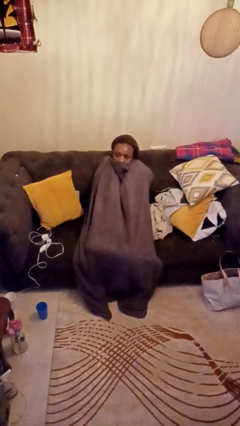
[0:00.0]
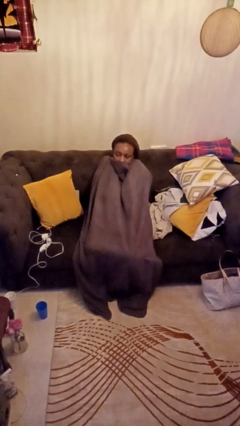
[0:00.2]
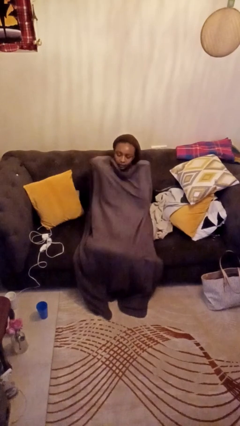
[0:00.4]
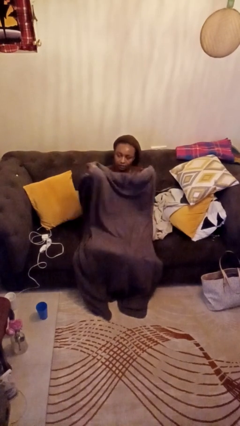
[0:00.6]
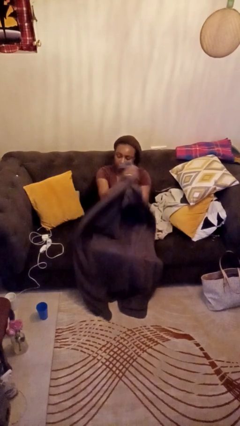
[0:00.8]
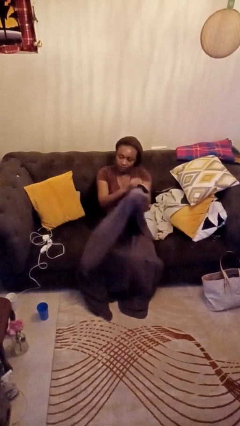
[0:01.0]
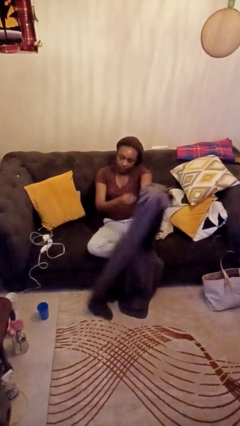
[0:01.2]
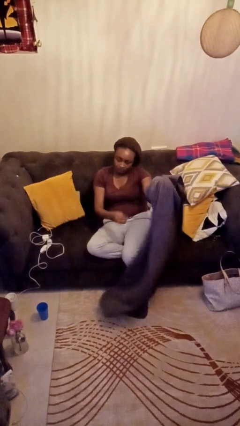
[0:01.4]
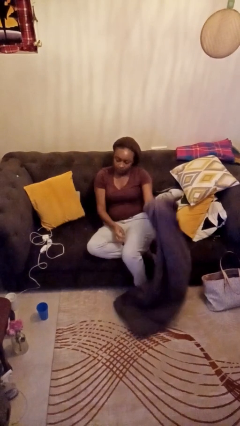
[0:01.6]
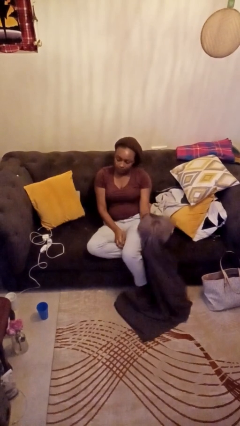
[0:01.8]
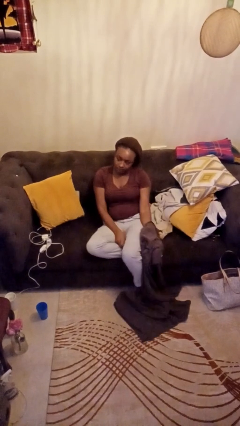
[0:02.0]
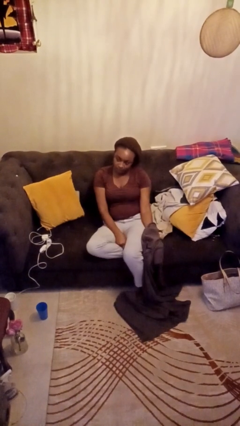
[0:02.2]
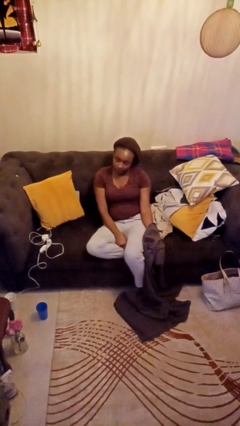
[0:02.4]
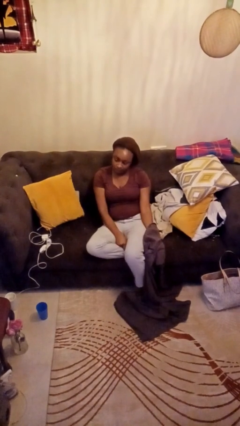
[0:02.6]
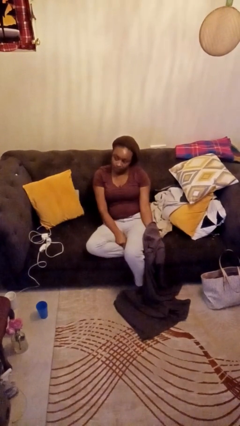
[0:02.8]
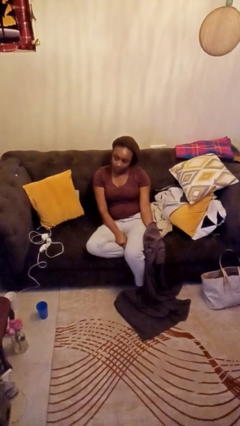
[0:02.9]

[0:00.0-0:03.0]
person uncovers with blanket

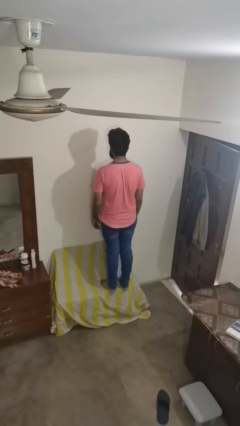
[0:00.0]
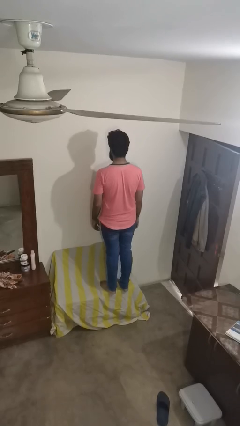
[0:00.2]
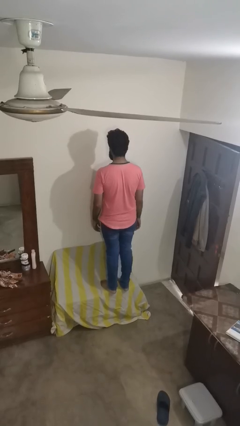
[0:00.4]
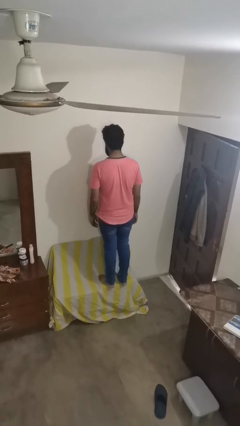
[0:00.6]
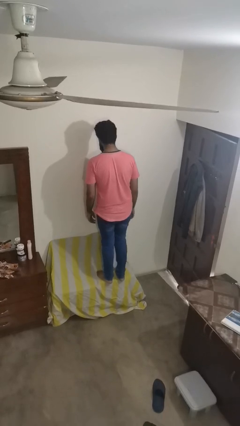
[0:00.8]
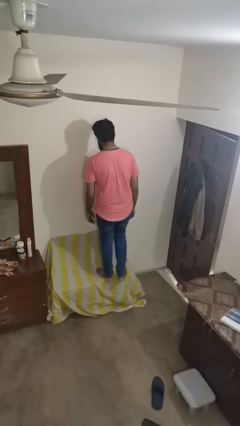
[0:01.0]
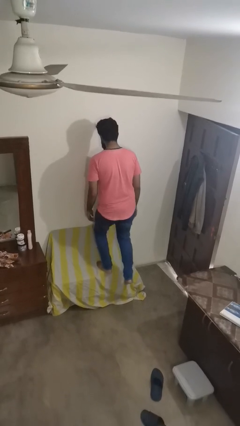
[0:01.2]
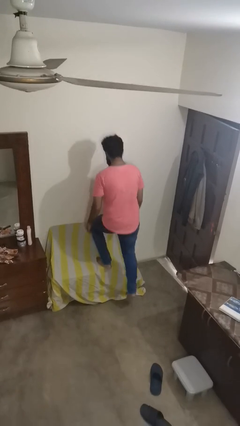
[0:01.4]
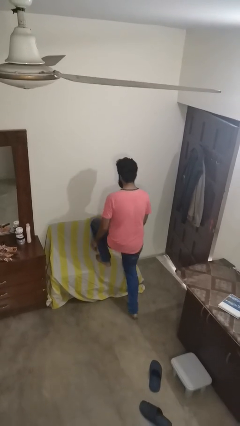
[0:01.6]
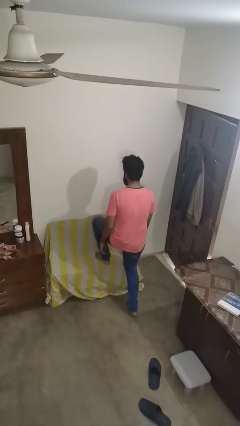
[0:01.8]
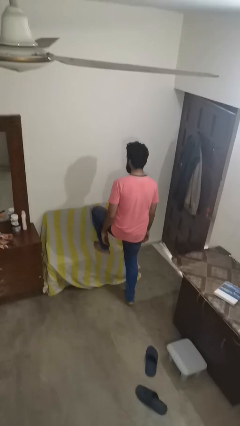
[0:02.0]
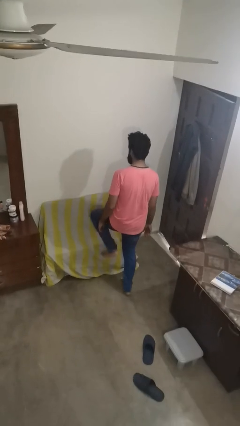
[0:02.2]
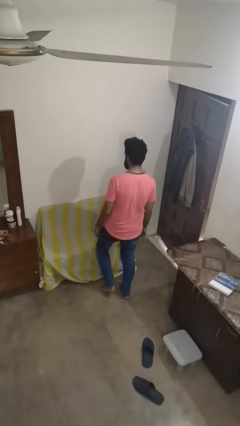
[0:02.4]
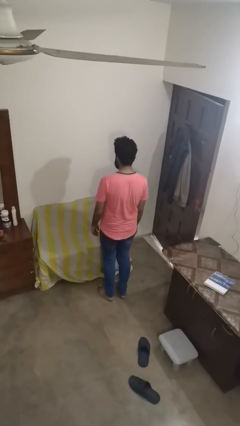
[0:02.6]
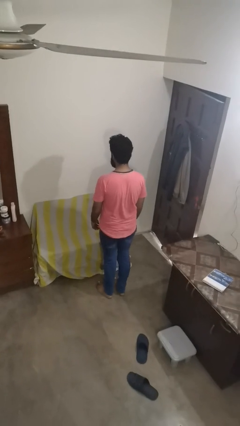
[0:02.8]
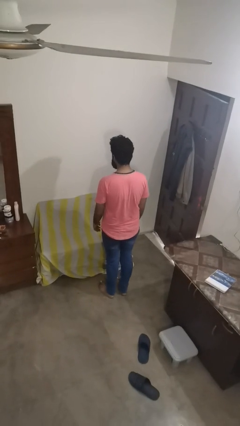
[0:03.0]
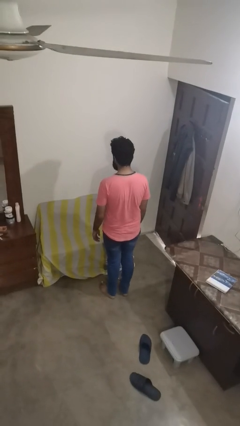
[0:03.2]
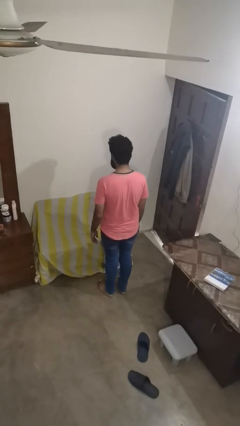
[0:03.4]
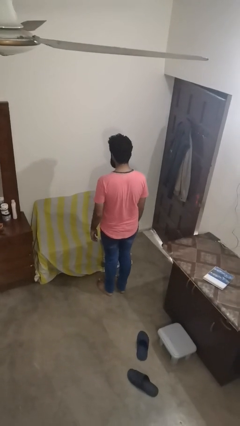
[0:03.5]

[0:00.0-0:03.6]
person climbs off couch

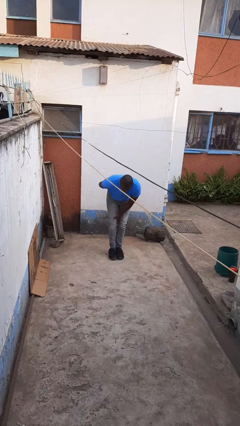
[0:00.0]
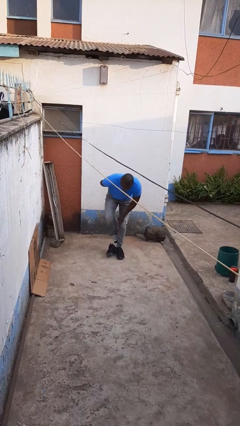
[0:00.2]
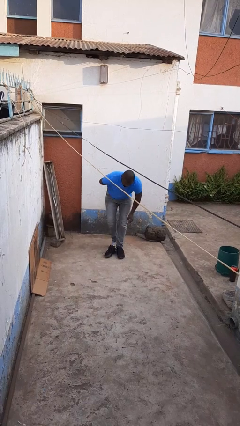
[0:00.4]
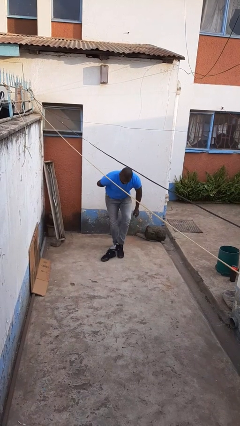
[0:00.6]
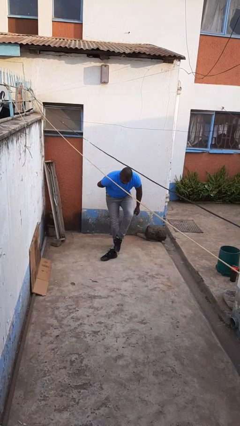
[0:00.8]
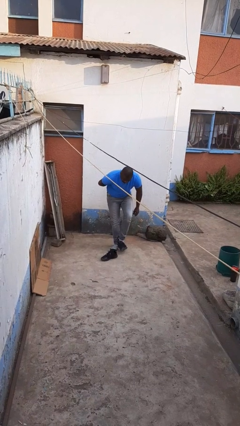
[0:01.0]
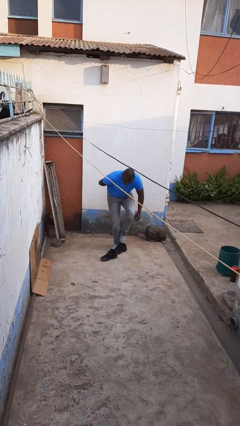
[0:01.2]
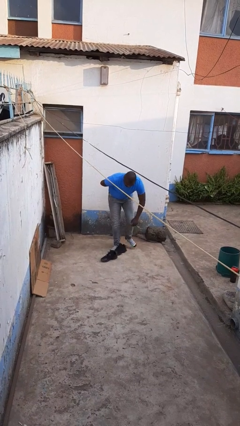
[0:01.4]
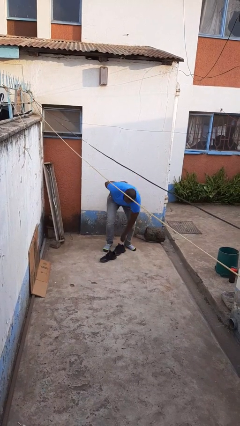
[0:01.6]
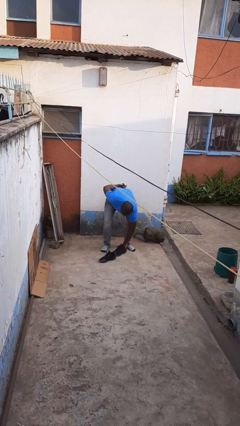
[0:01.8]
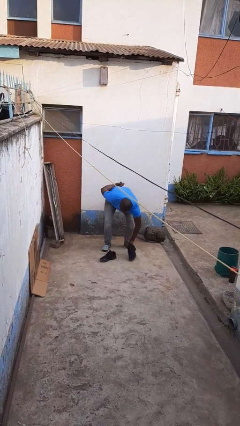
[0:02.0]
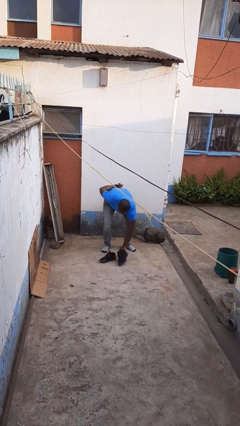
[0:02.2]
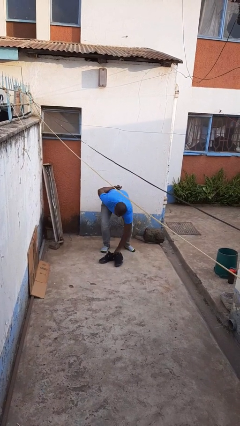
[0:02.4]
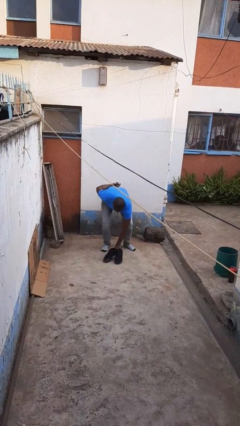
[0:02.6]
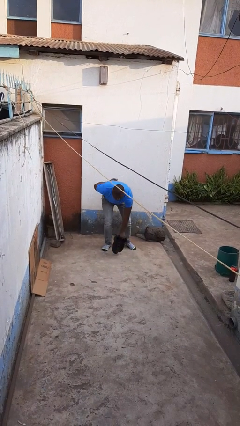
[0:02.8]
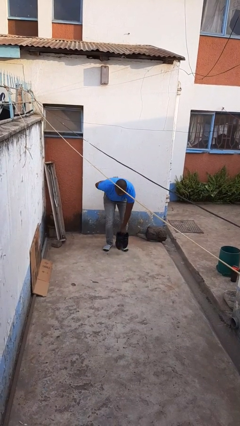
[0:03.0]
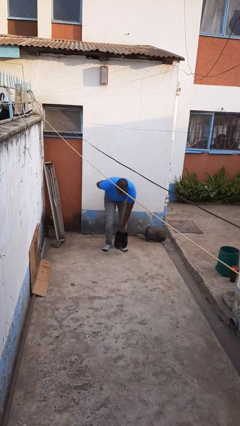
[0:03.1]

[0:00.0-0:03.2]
person takes off shoes

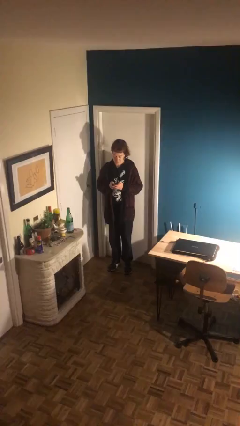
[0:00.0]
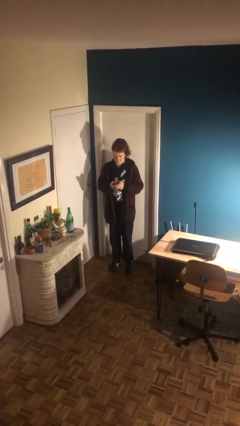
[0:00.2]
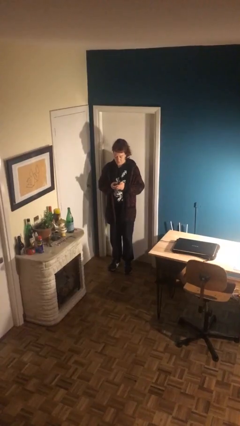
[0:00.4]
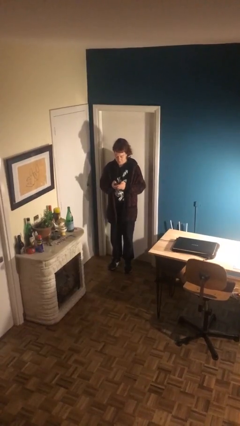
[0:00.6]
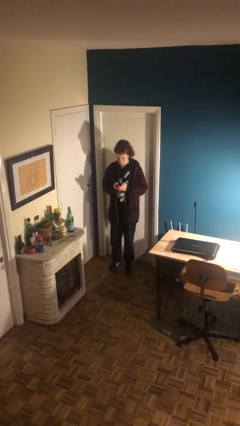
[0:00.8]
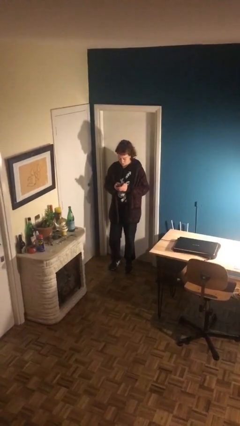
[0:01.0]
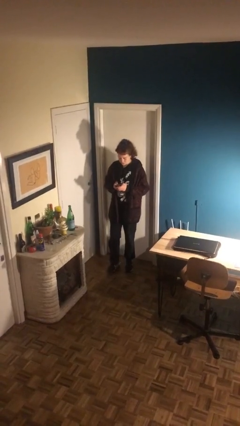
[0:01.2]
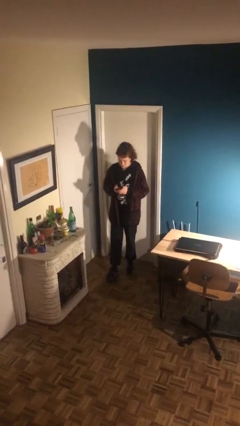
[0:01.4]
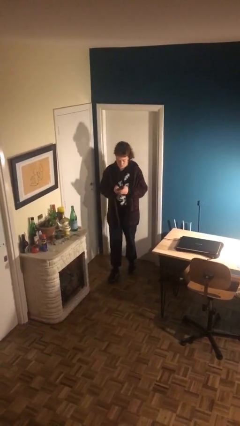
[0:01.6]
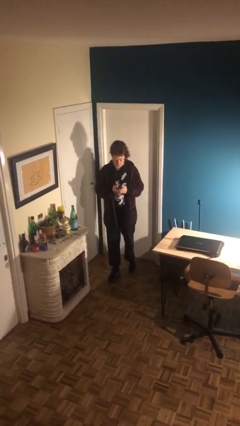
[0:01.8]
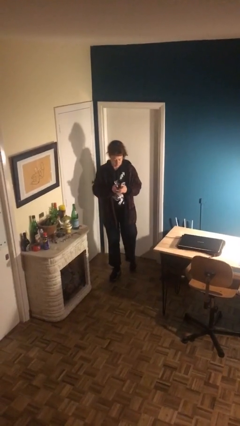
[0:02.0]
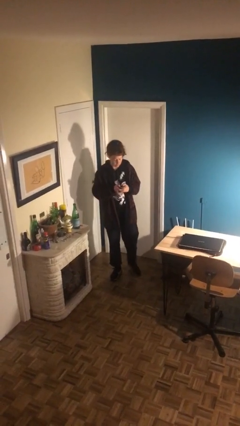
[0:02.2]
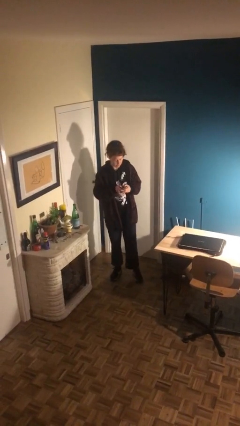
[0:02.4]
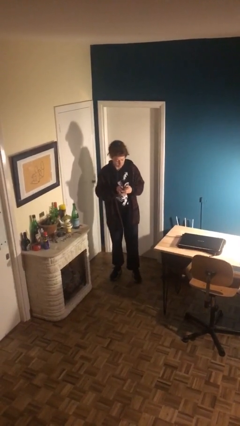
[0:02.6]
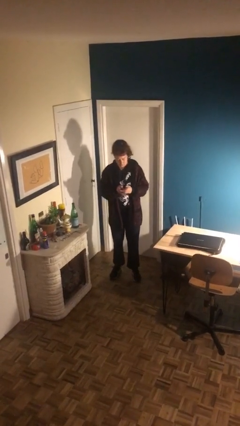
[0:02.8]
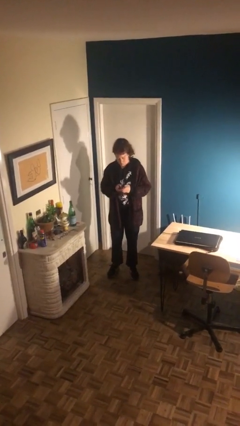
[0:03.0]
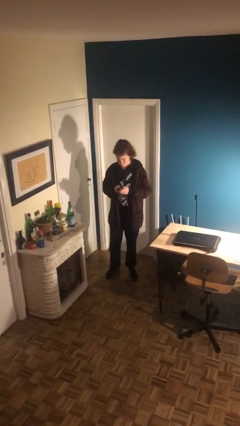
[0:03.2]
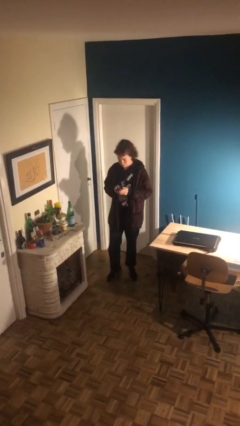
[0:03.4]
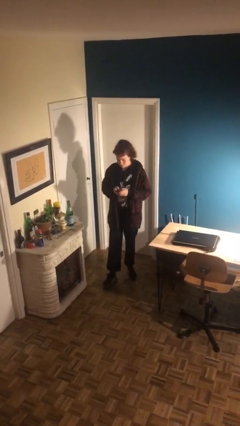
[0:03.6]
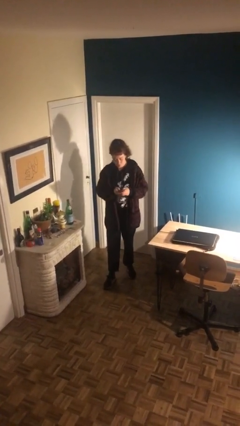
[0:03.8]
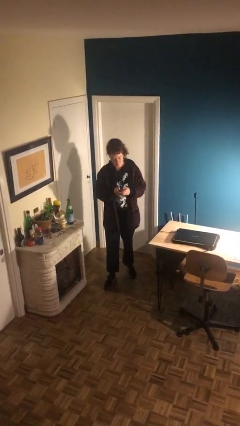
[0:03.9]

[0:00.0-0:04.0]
person texts on phone

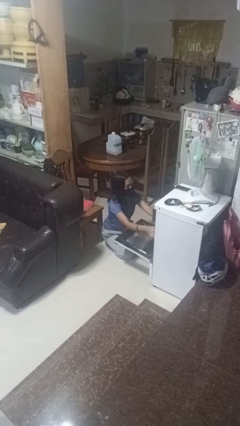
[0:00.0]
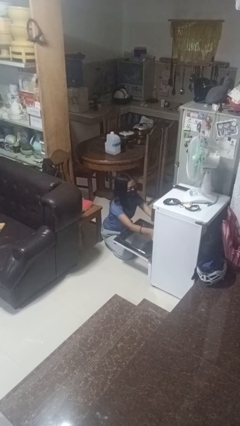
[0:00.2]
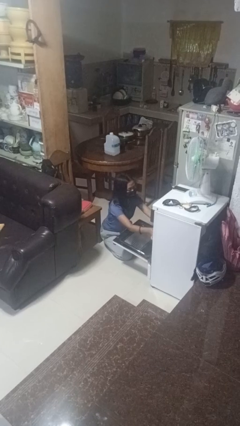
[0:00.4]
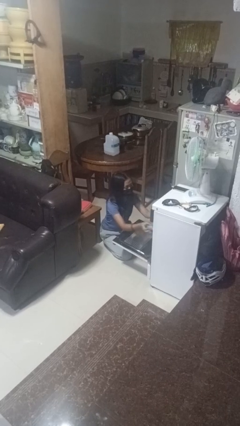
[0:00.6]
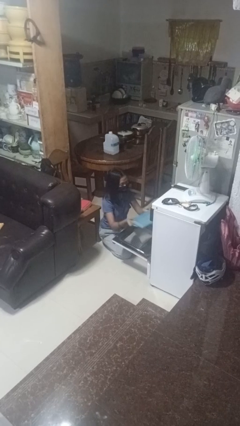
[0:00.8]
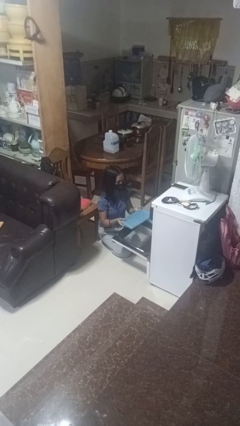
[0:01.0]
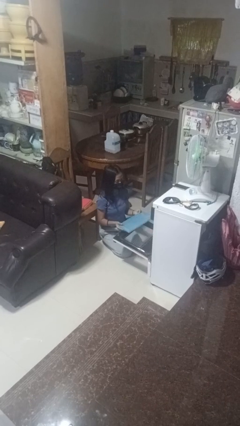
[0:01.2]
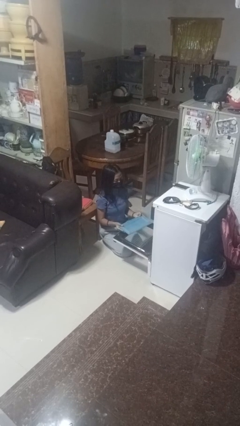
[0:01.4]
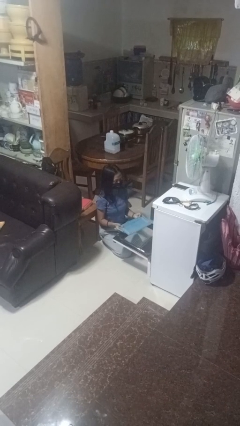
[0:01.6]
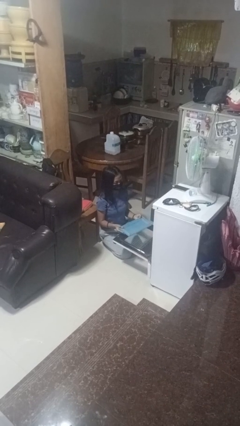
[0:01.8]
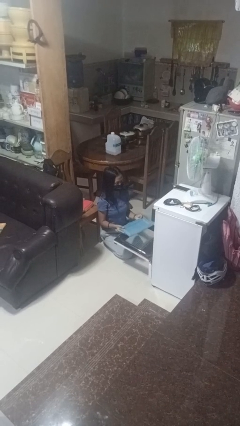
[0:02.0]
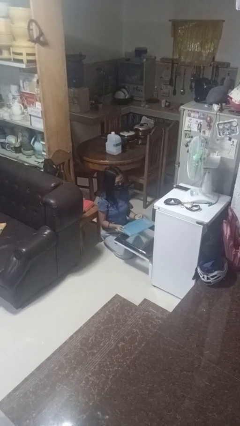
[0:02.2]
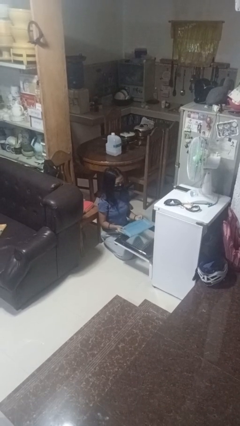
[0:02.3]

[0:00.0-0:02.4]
person takes object from oven

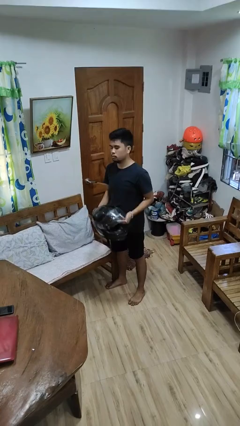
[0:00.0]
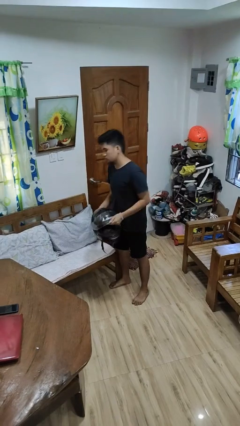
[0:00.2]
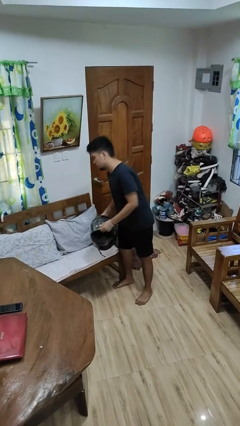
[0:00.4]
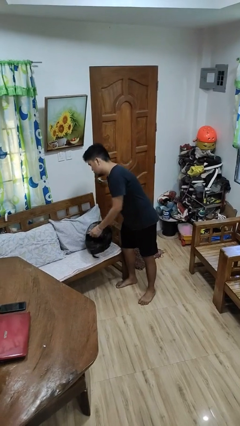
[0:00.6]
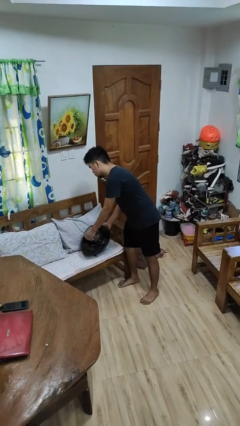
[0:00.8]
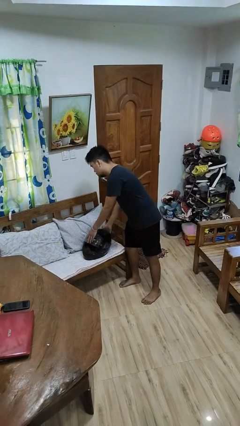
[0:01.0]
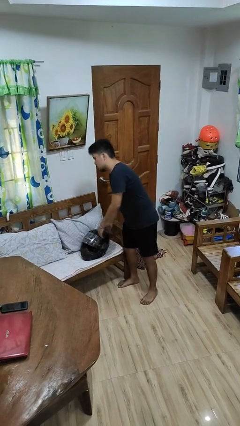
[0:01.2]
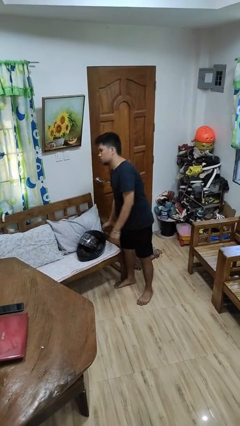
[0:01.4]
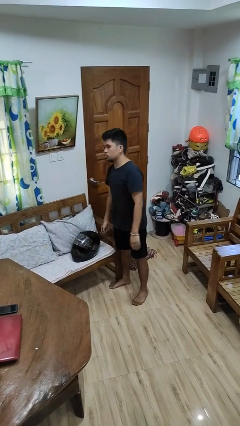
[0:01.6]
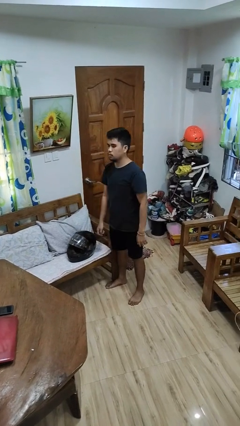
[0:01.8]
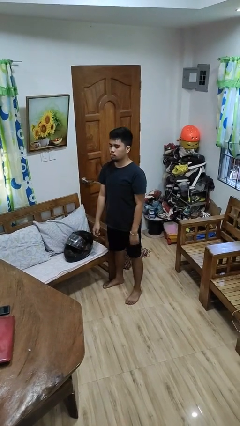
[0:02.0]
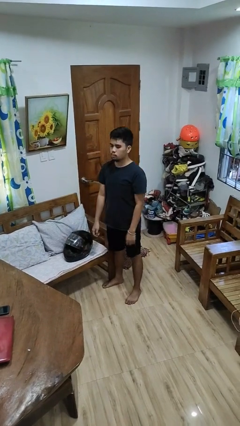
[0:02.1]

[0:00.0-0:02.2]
person puts down object on couch
